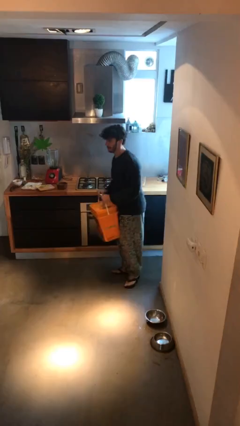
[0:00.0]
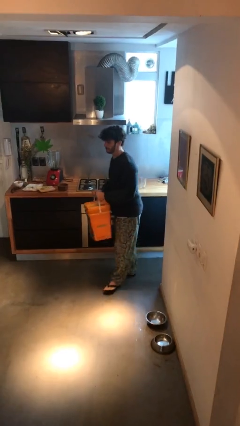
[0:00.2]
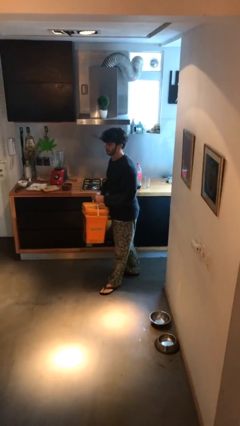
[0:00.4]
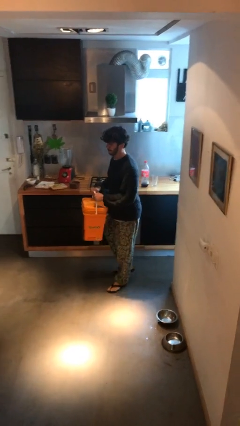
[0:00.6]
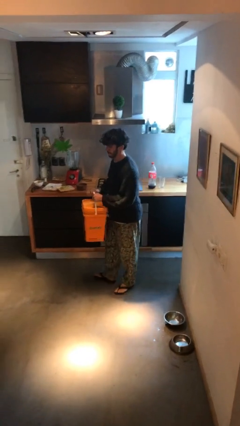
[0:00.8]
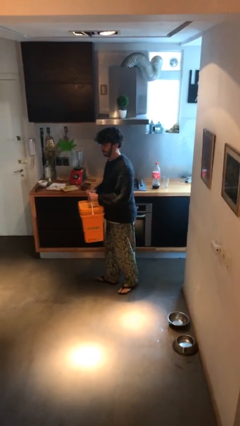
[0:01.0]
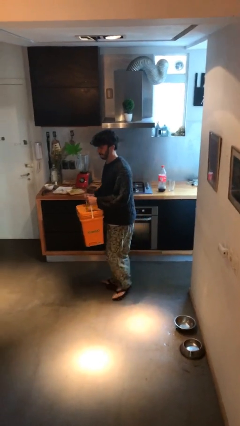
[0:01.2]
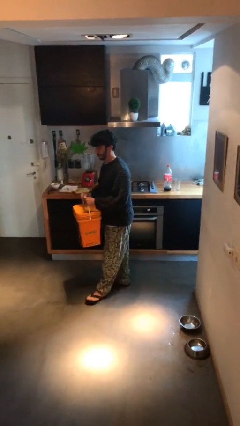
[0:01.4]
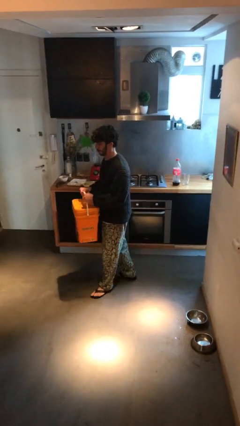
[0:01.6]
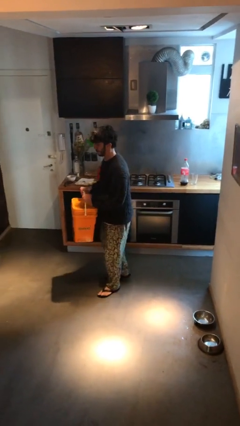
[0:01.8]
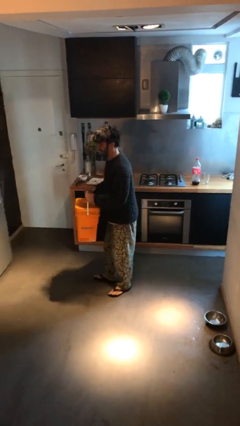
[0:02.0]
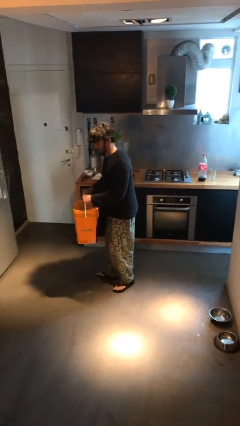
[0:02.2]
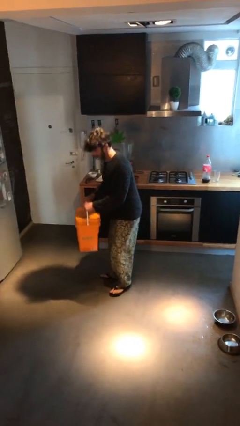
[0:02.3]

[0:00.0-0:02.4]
person carries heavy object

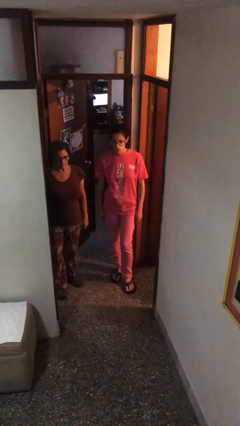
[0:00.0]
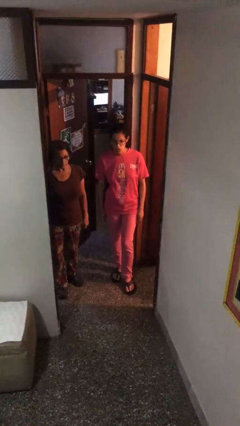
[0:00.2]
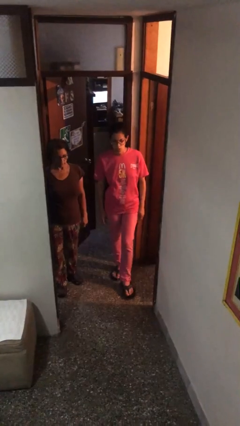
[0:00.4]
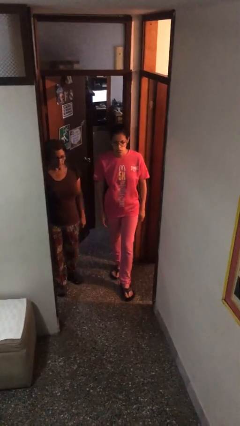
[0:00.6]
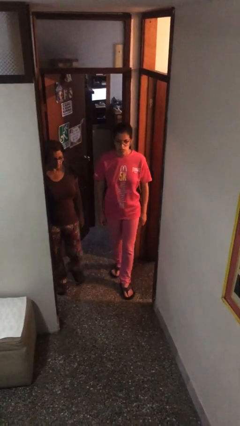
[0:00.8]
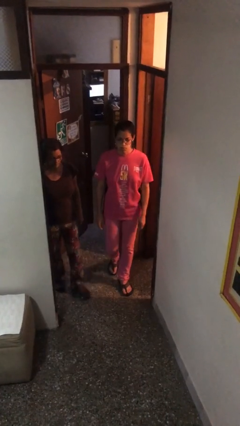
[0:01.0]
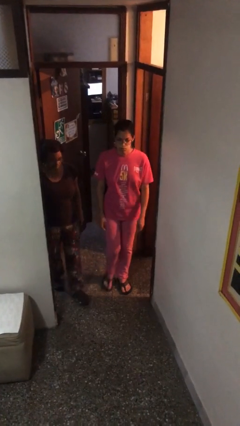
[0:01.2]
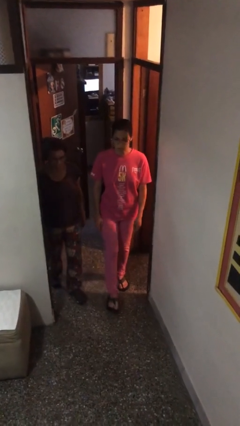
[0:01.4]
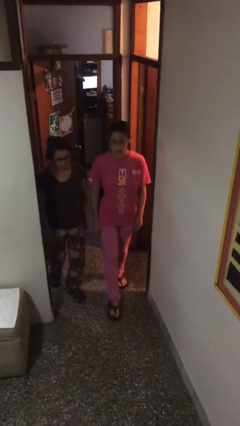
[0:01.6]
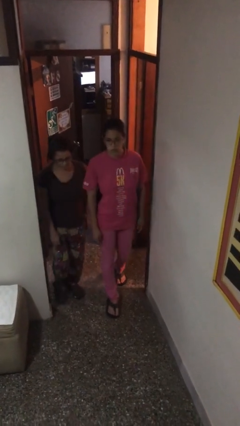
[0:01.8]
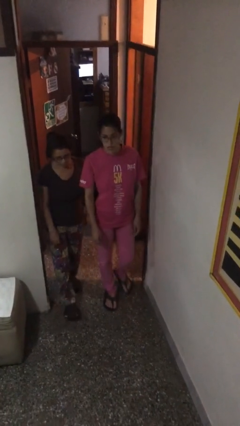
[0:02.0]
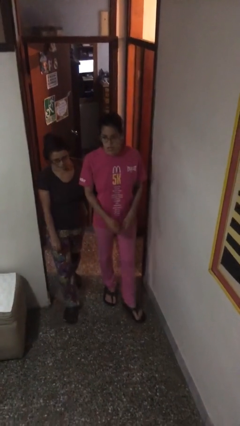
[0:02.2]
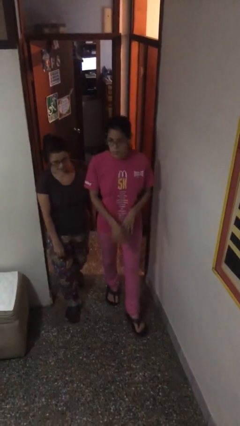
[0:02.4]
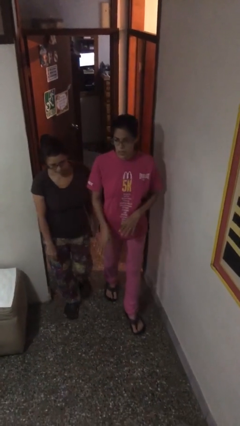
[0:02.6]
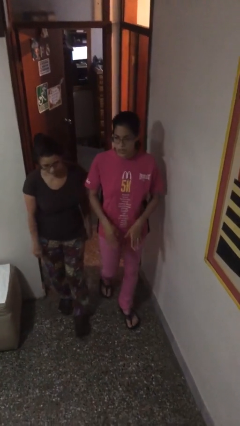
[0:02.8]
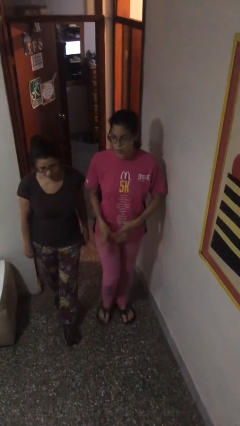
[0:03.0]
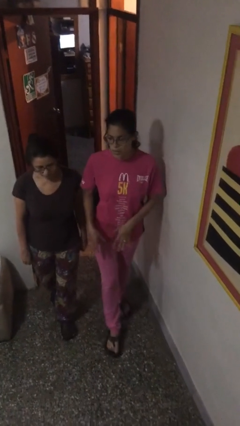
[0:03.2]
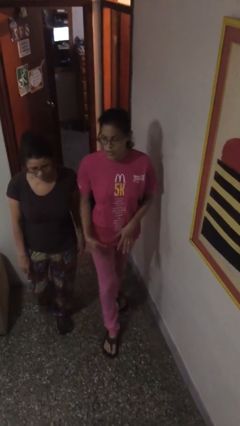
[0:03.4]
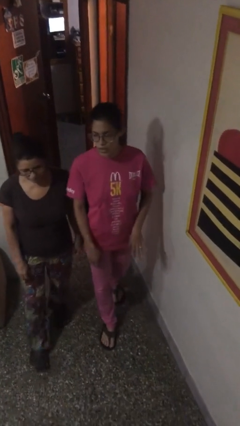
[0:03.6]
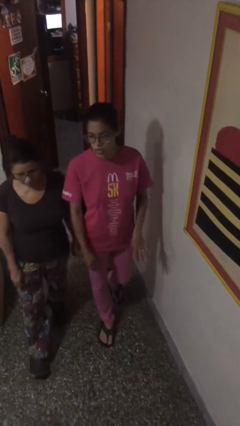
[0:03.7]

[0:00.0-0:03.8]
person talks to person

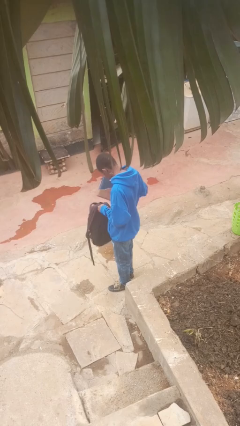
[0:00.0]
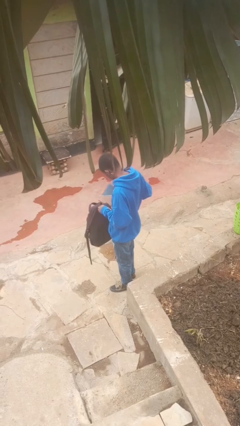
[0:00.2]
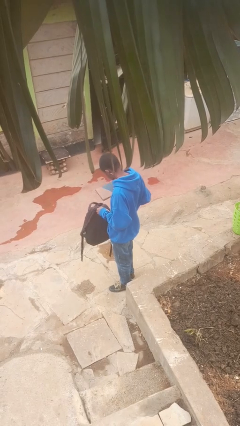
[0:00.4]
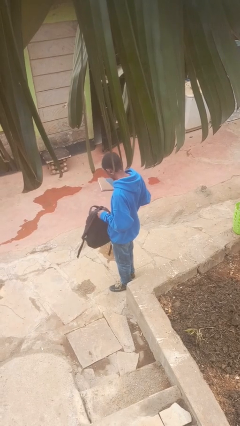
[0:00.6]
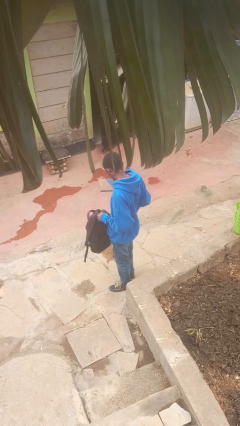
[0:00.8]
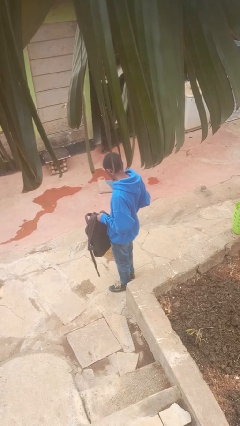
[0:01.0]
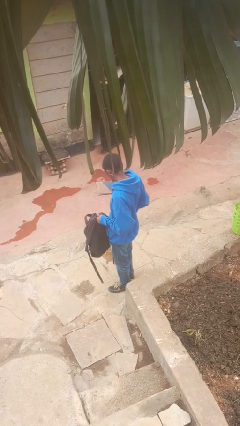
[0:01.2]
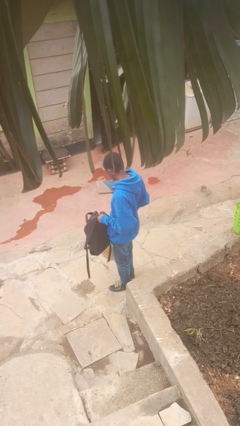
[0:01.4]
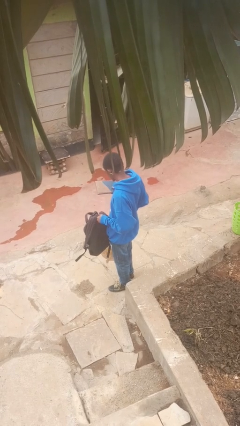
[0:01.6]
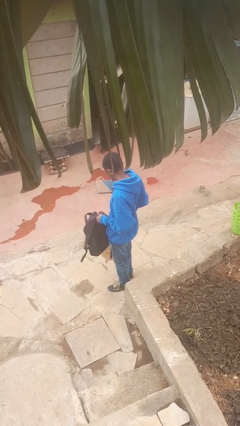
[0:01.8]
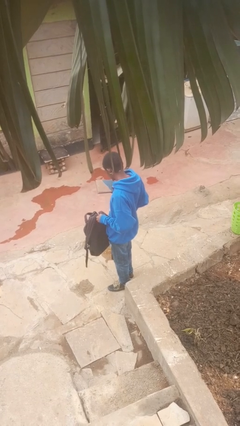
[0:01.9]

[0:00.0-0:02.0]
person takes object from backpack

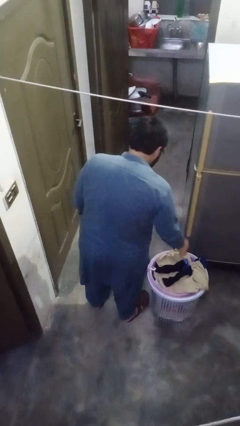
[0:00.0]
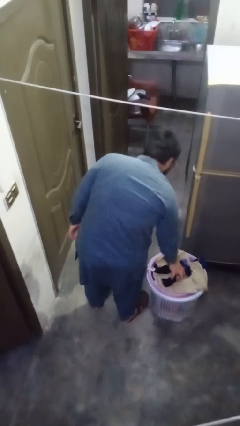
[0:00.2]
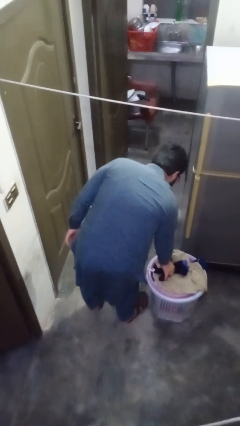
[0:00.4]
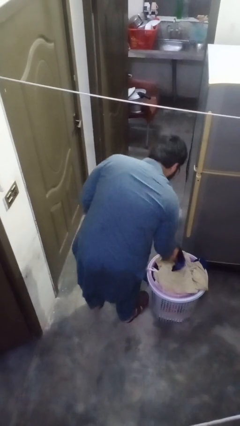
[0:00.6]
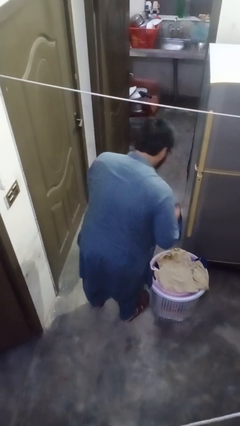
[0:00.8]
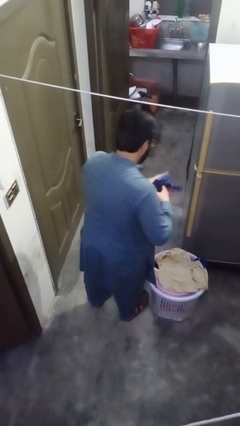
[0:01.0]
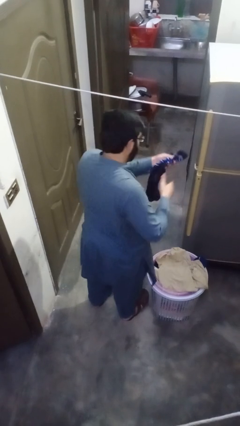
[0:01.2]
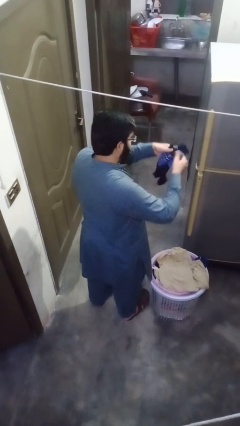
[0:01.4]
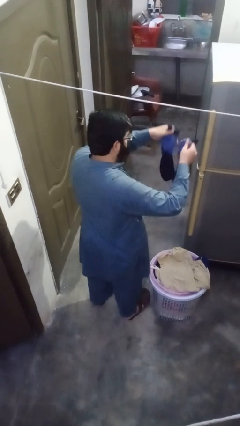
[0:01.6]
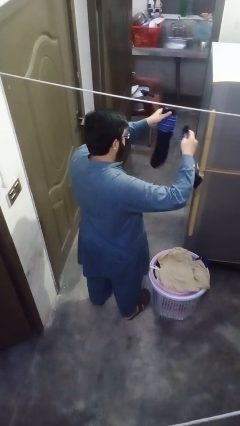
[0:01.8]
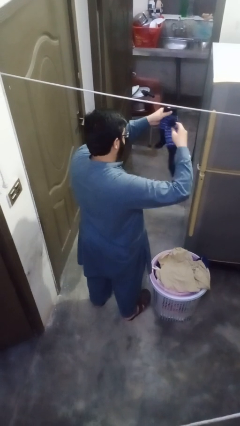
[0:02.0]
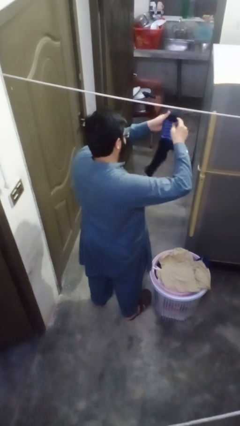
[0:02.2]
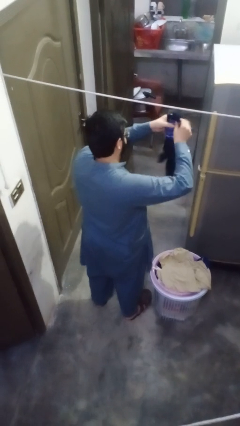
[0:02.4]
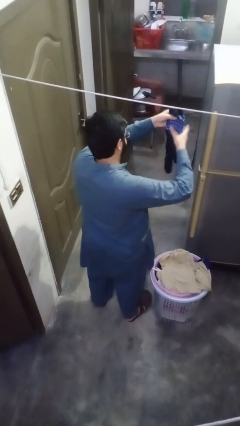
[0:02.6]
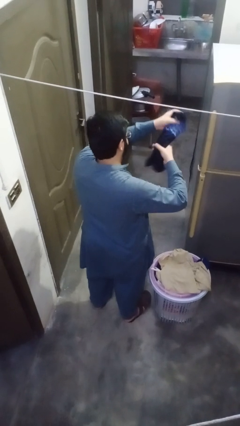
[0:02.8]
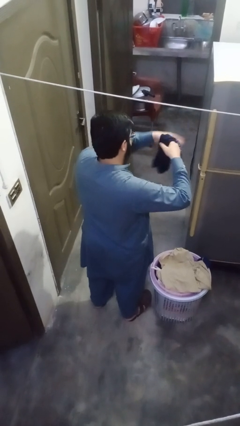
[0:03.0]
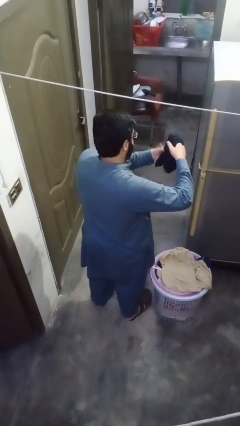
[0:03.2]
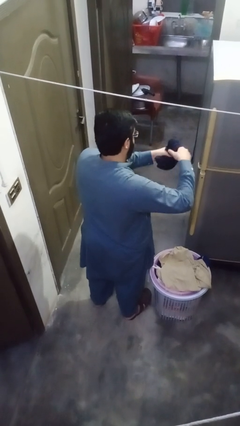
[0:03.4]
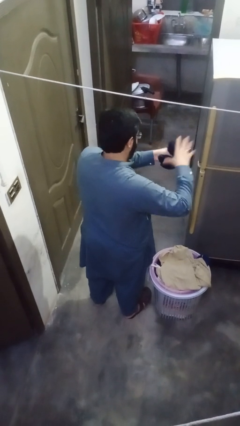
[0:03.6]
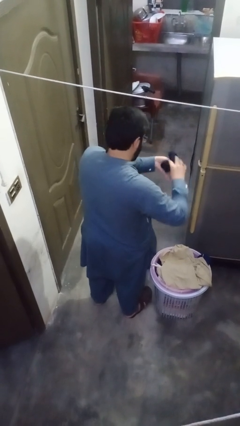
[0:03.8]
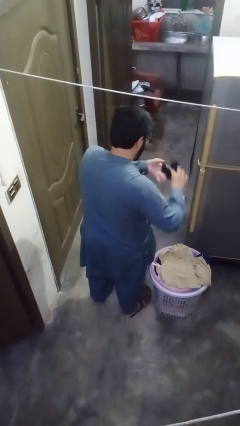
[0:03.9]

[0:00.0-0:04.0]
person folds socks

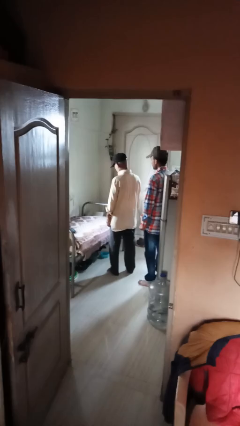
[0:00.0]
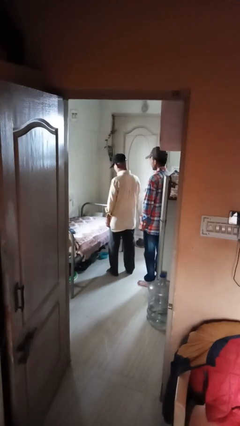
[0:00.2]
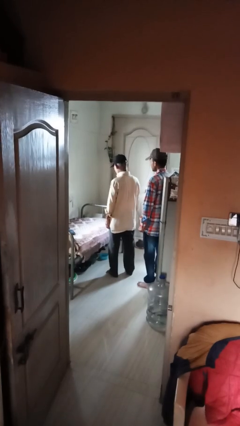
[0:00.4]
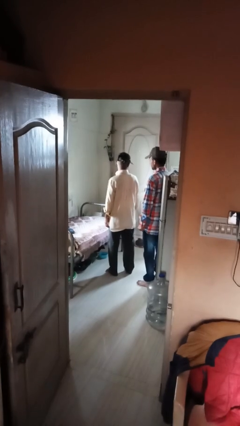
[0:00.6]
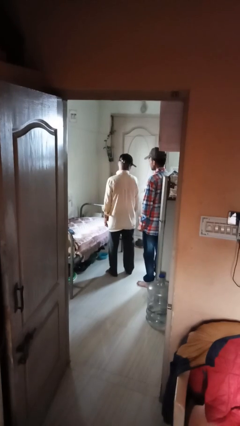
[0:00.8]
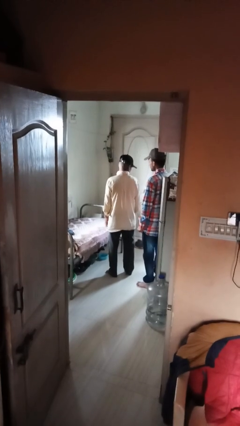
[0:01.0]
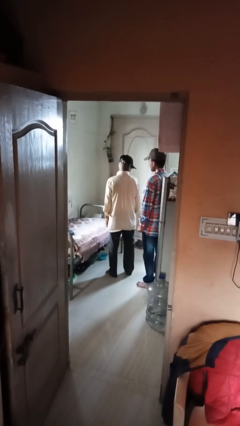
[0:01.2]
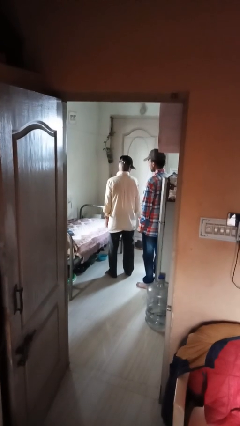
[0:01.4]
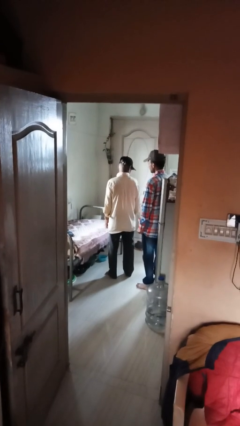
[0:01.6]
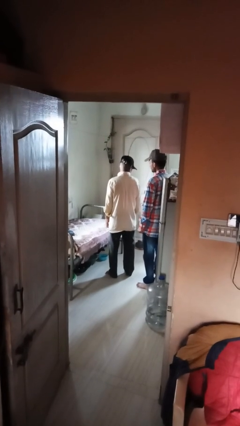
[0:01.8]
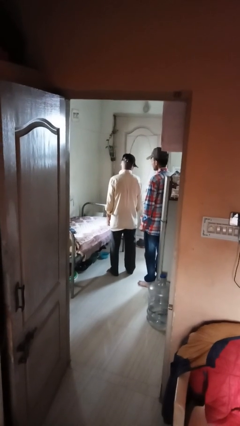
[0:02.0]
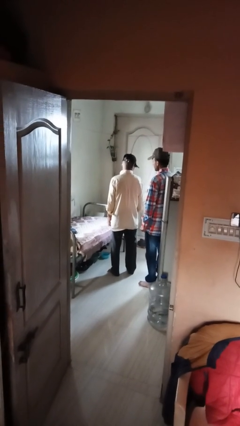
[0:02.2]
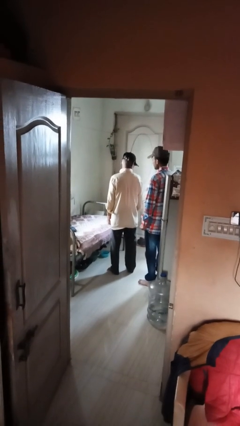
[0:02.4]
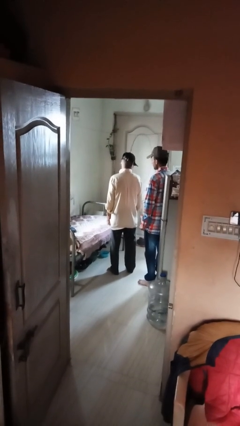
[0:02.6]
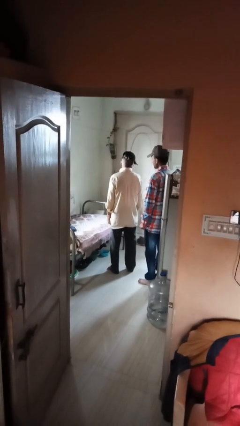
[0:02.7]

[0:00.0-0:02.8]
person looks over shoulder

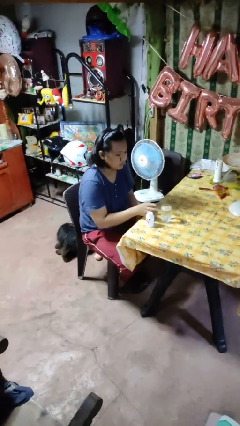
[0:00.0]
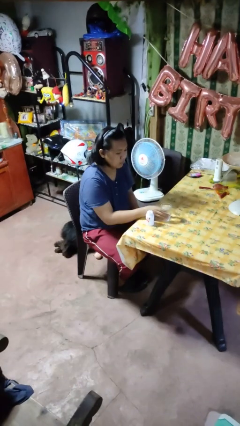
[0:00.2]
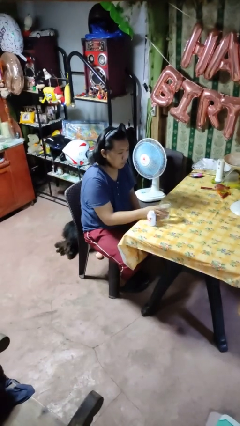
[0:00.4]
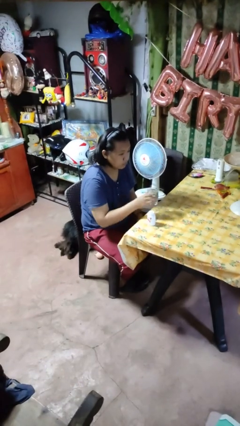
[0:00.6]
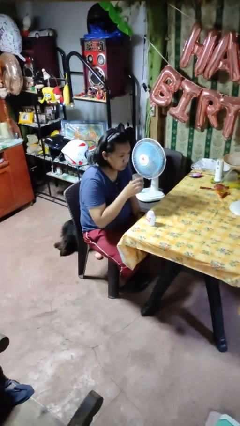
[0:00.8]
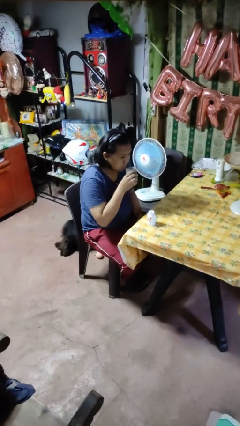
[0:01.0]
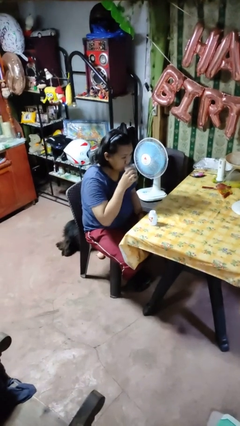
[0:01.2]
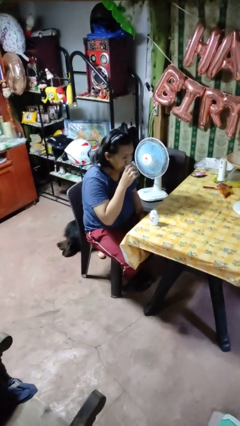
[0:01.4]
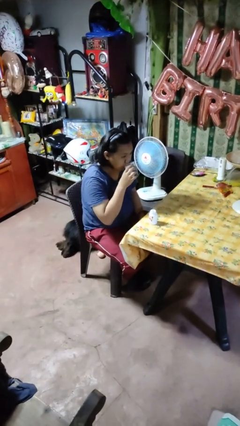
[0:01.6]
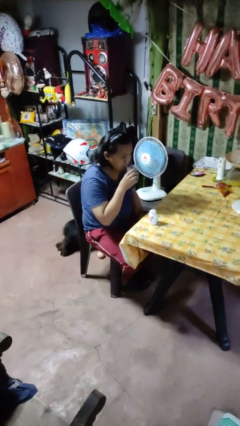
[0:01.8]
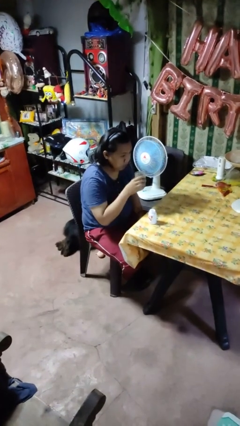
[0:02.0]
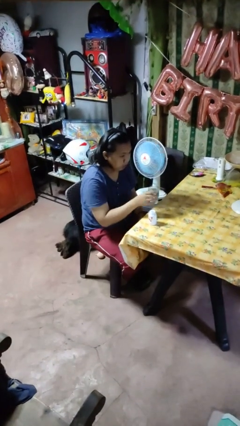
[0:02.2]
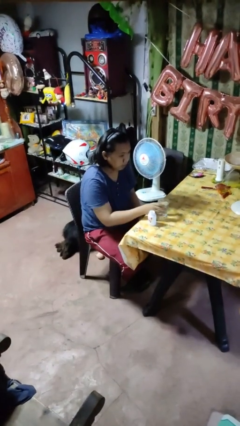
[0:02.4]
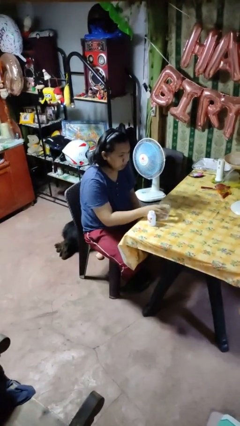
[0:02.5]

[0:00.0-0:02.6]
person drinks from cup

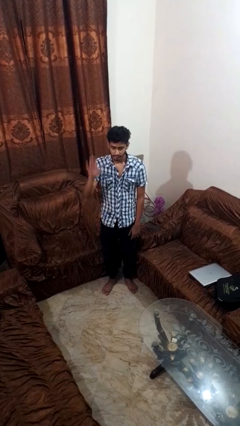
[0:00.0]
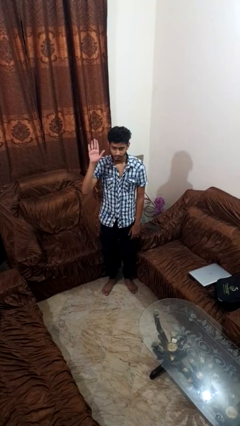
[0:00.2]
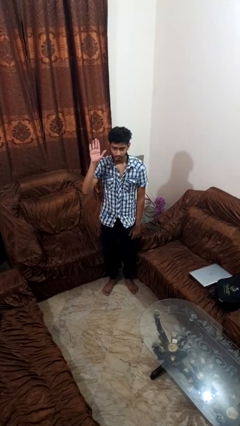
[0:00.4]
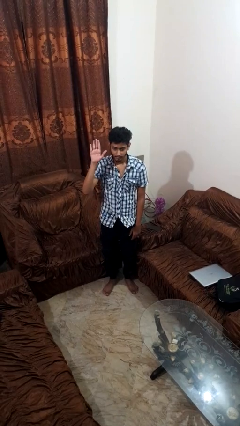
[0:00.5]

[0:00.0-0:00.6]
person gestures raise hand
